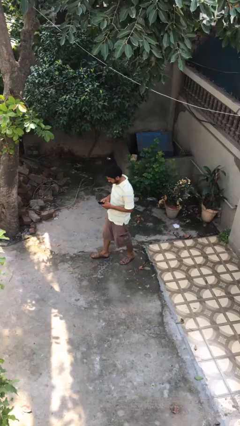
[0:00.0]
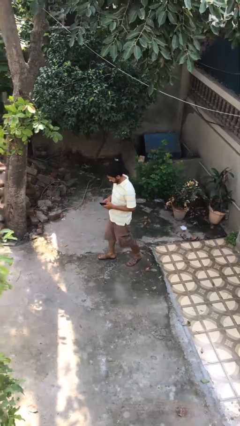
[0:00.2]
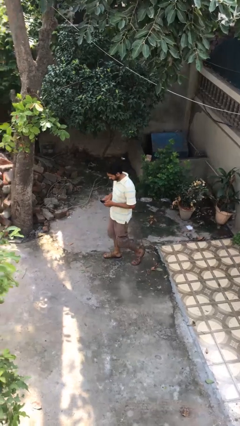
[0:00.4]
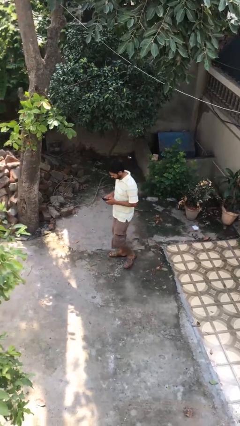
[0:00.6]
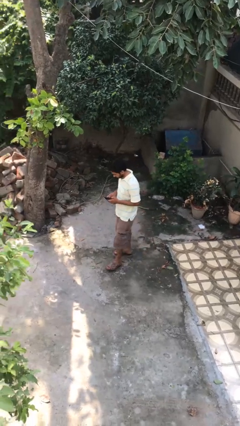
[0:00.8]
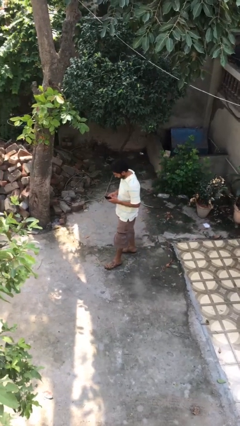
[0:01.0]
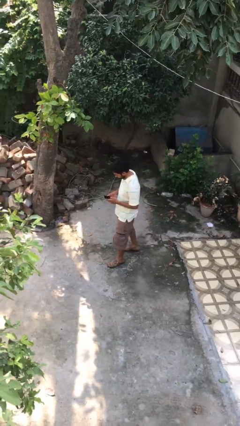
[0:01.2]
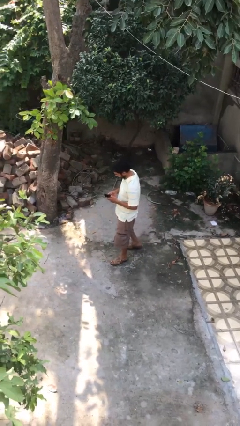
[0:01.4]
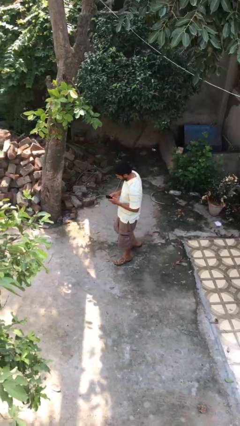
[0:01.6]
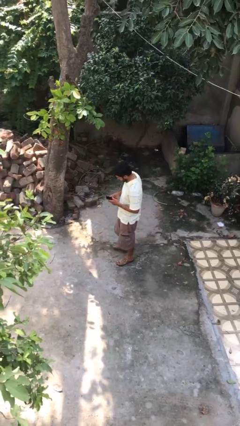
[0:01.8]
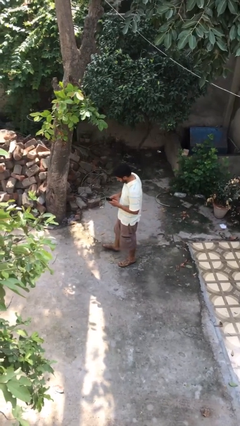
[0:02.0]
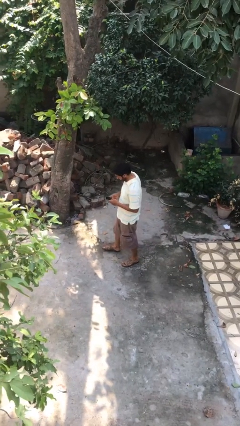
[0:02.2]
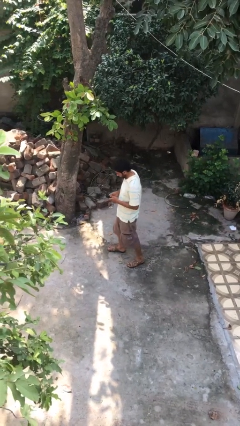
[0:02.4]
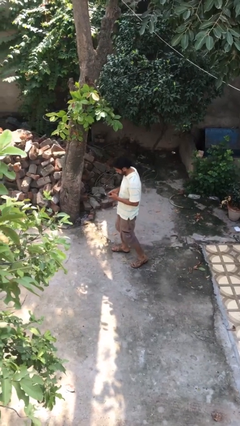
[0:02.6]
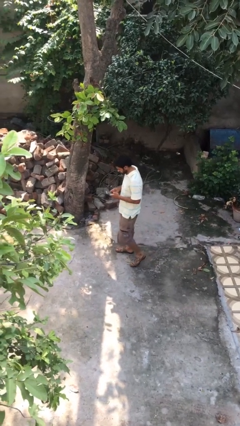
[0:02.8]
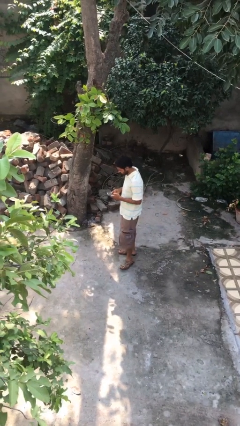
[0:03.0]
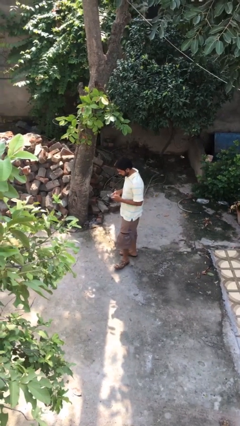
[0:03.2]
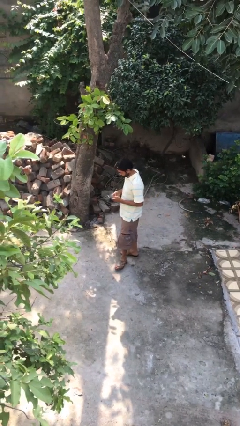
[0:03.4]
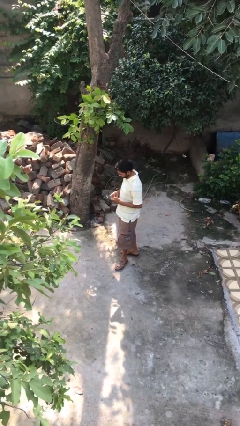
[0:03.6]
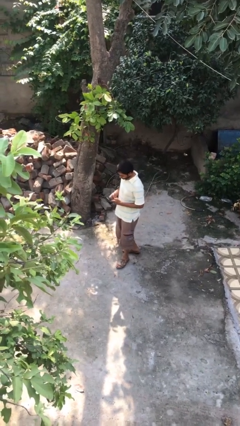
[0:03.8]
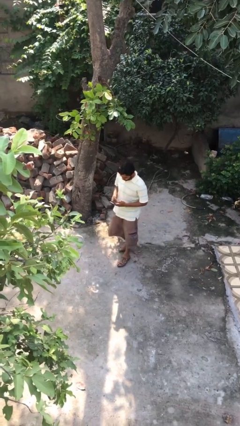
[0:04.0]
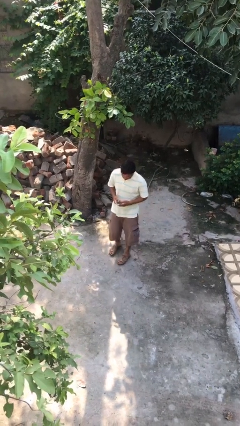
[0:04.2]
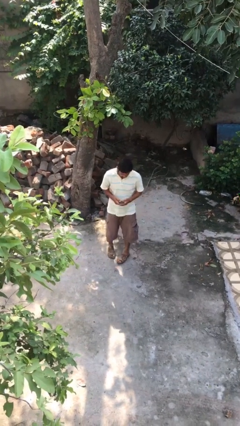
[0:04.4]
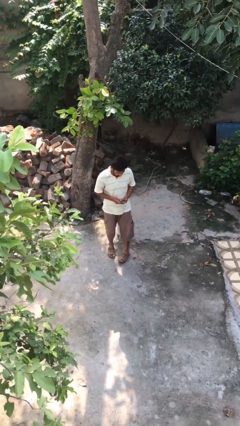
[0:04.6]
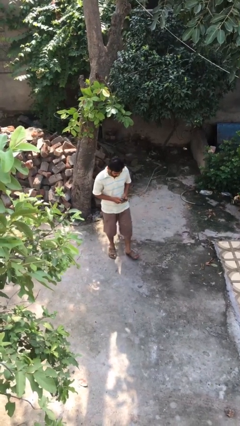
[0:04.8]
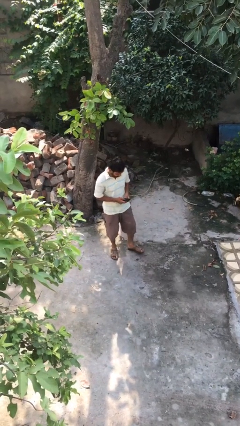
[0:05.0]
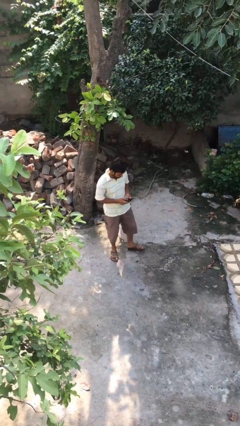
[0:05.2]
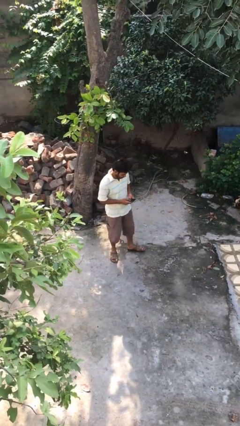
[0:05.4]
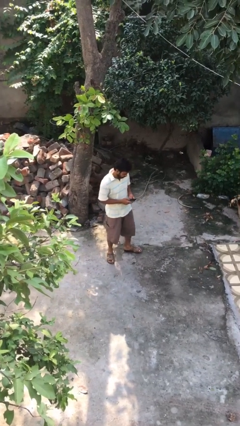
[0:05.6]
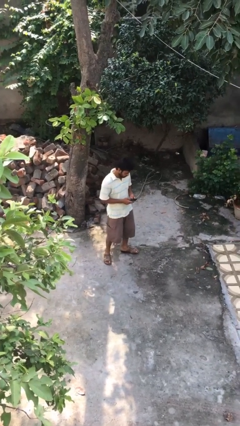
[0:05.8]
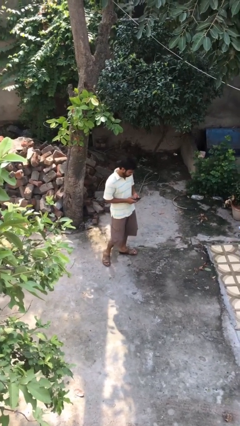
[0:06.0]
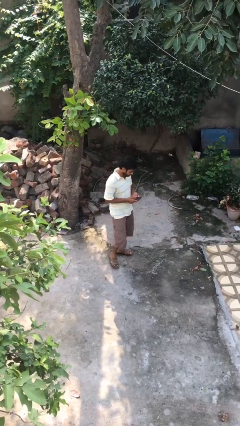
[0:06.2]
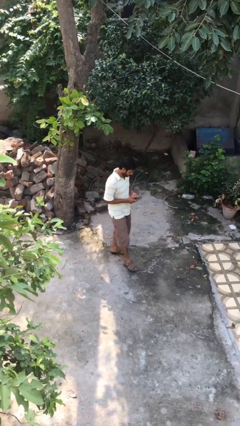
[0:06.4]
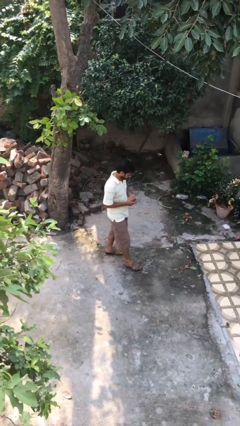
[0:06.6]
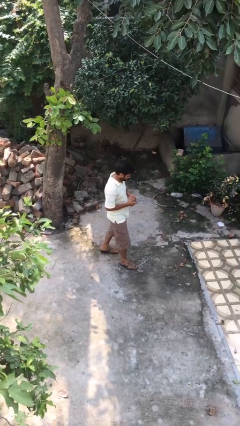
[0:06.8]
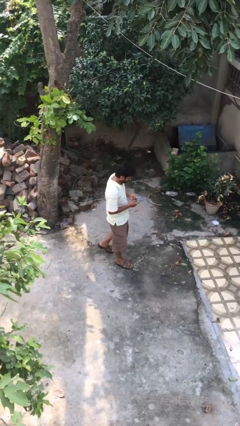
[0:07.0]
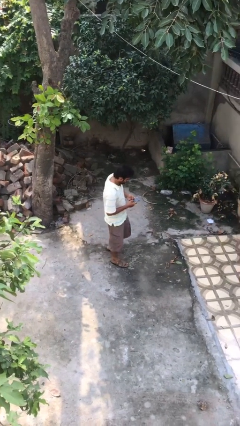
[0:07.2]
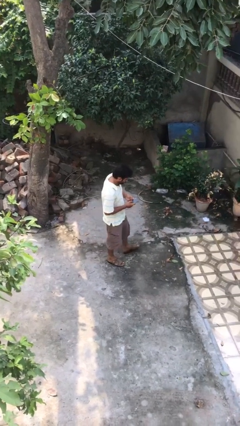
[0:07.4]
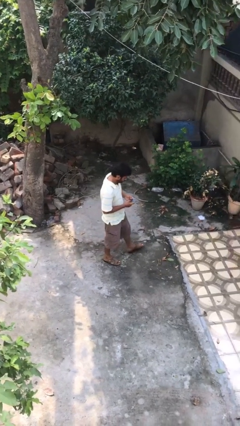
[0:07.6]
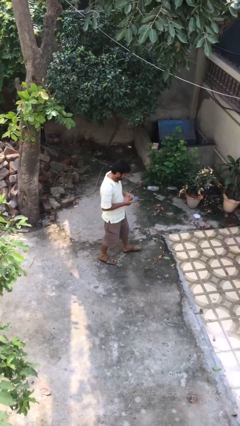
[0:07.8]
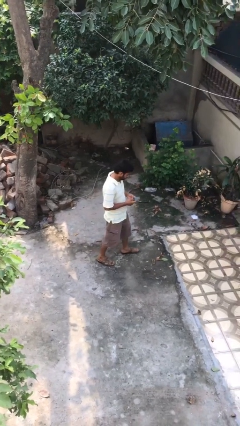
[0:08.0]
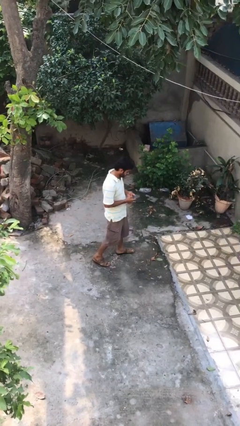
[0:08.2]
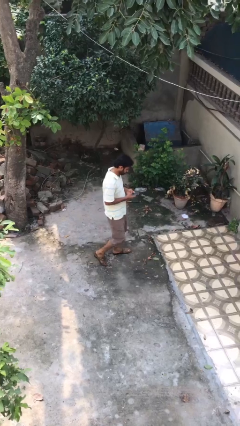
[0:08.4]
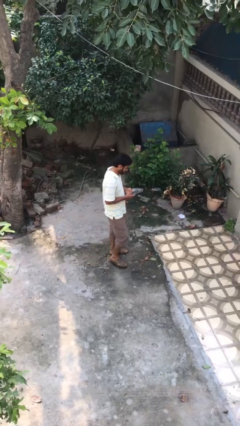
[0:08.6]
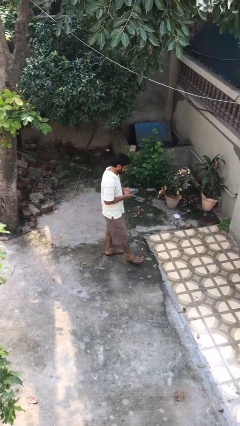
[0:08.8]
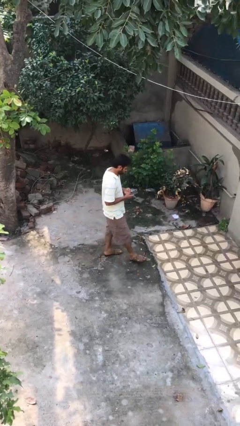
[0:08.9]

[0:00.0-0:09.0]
person texts on phone

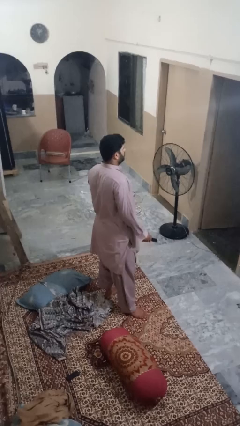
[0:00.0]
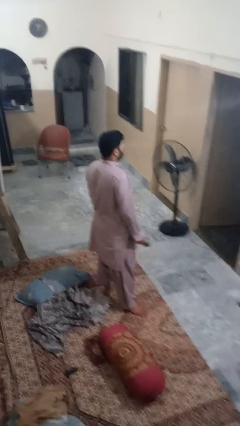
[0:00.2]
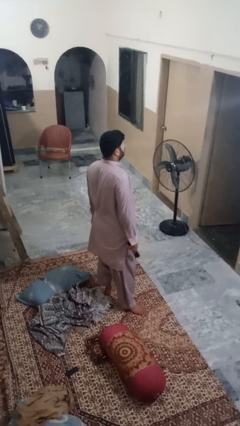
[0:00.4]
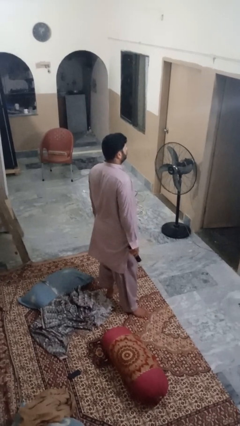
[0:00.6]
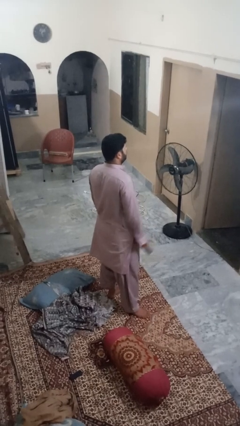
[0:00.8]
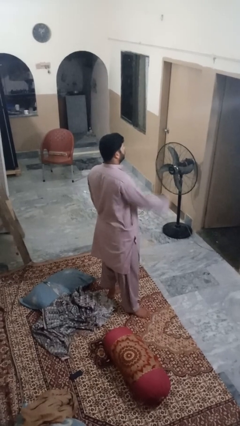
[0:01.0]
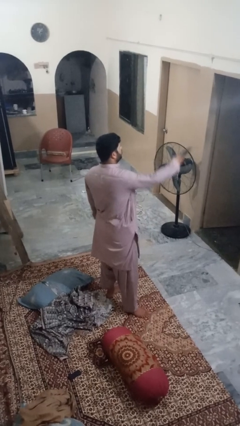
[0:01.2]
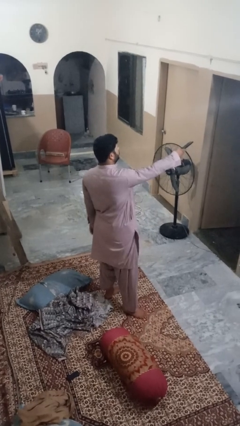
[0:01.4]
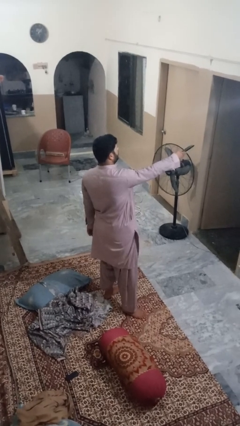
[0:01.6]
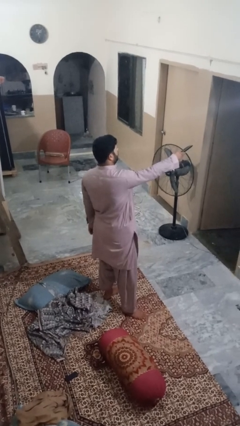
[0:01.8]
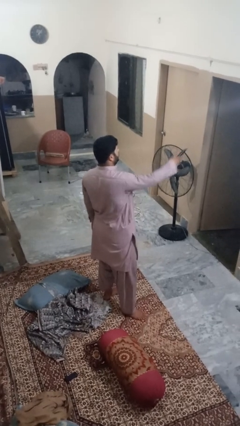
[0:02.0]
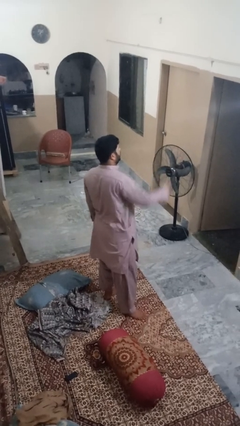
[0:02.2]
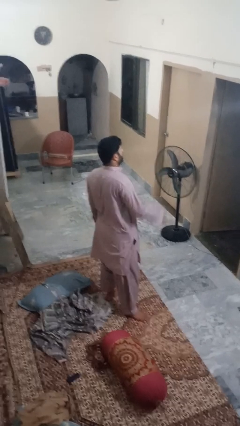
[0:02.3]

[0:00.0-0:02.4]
person uses television remote

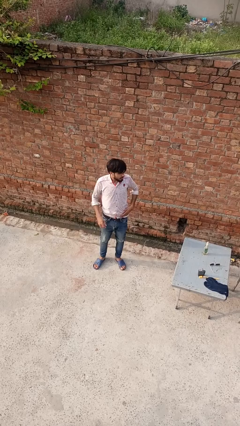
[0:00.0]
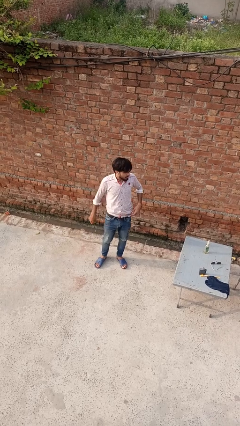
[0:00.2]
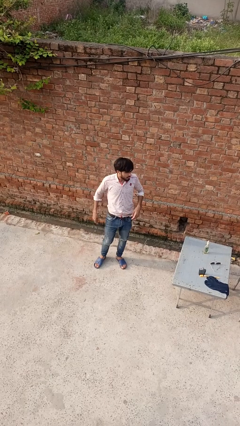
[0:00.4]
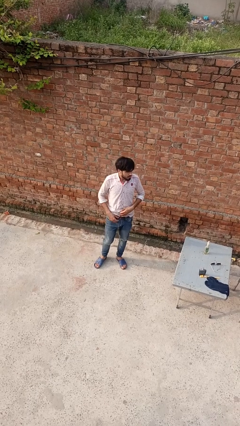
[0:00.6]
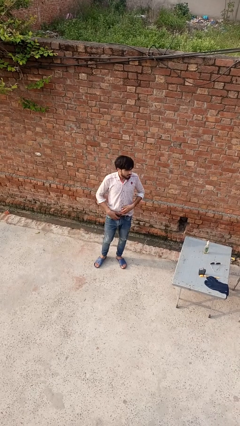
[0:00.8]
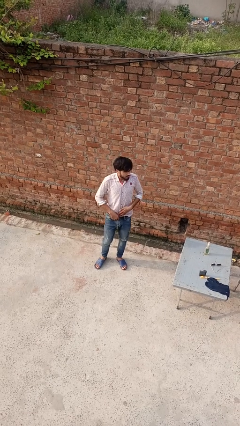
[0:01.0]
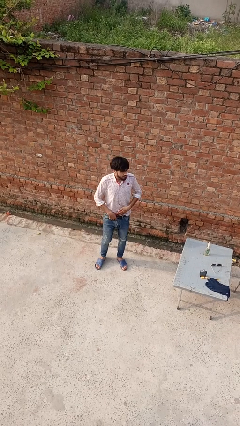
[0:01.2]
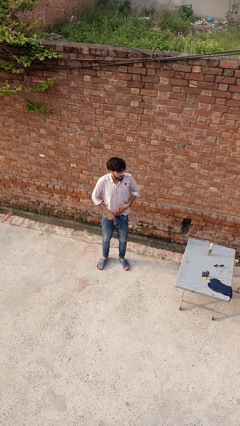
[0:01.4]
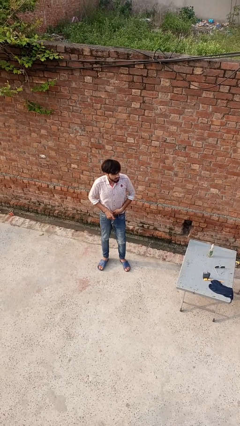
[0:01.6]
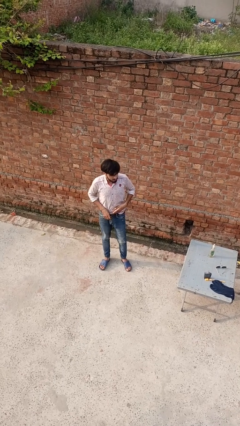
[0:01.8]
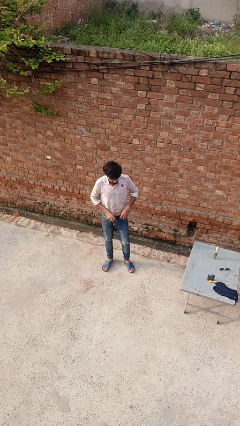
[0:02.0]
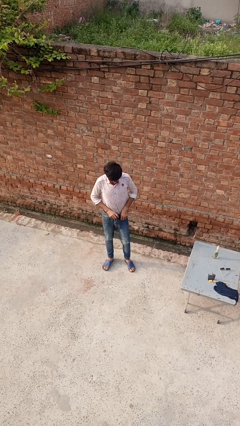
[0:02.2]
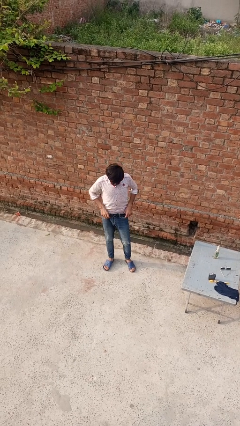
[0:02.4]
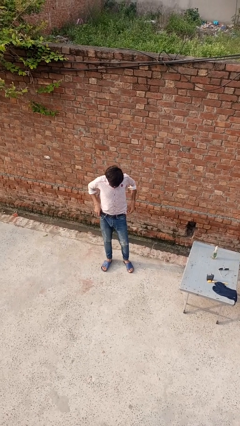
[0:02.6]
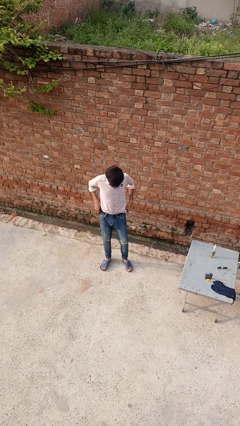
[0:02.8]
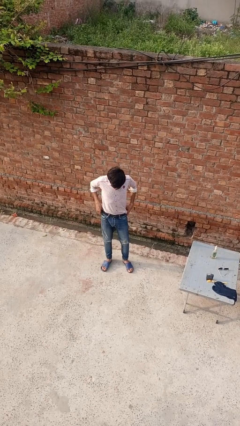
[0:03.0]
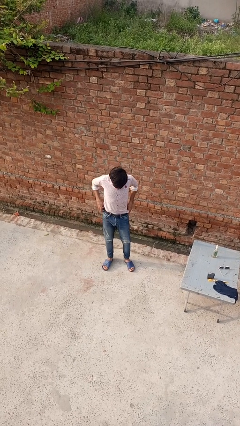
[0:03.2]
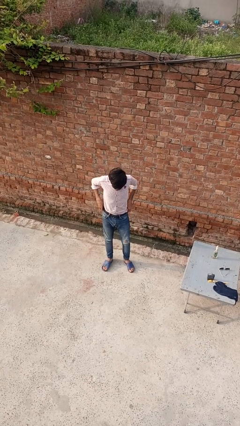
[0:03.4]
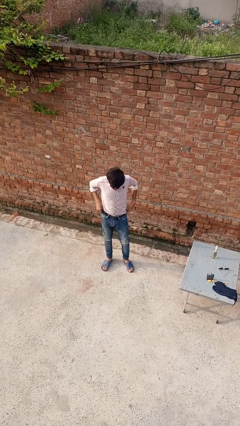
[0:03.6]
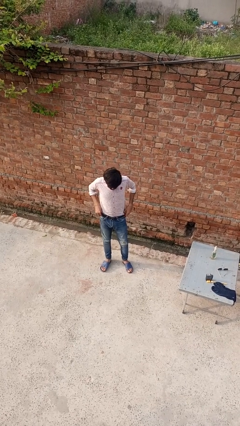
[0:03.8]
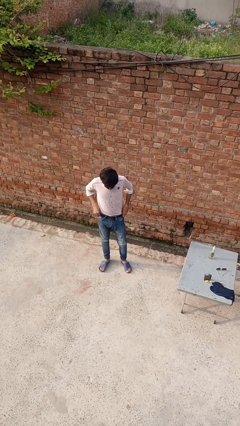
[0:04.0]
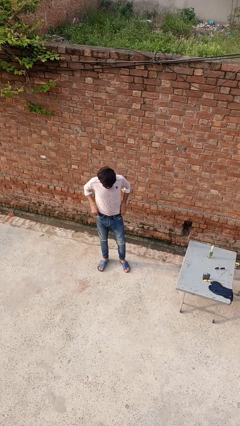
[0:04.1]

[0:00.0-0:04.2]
person hikes up pants

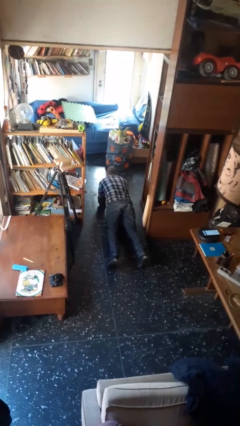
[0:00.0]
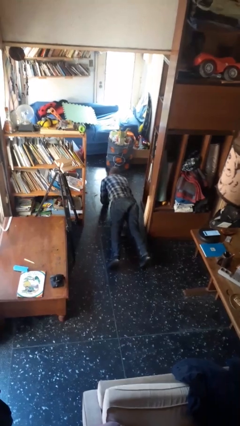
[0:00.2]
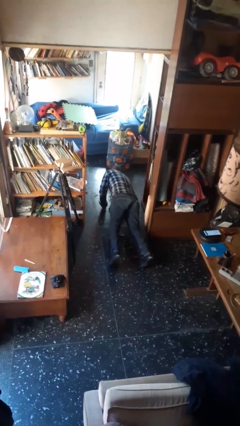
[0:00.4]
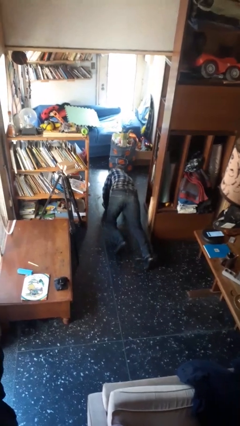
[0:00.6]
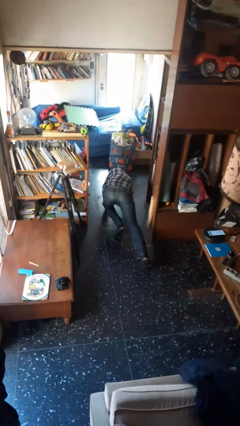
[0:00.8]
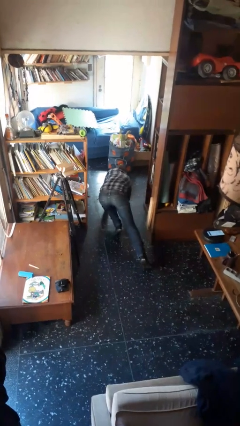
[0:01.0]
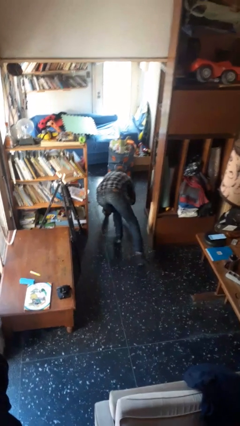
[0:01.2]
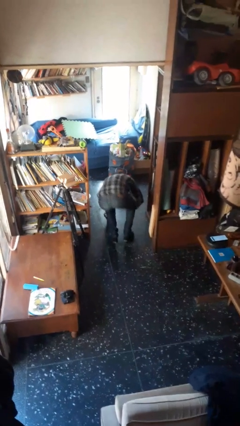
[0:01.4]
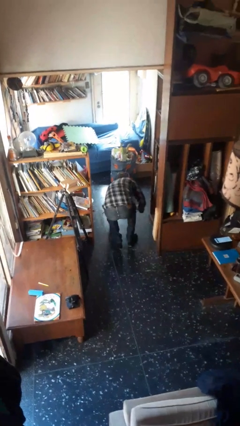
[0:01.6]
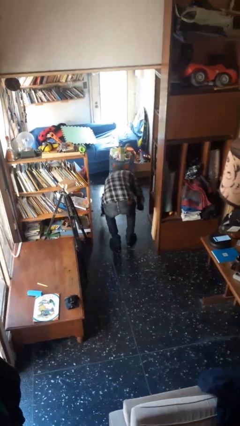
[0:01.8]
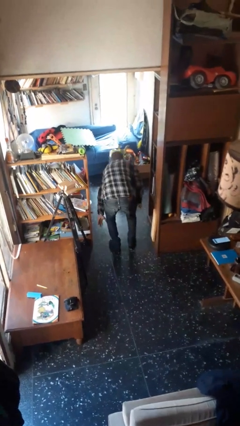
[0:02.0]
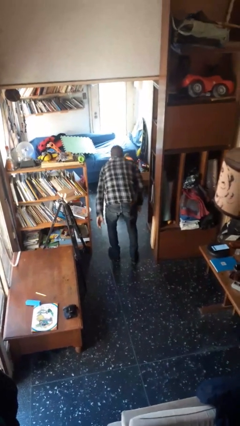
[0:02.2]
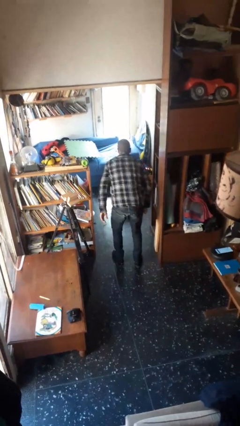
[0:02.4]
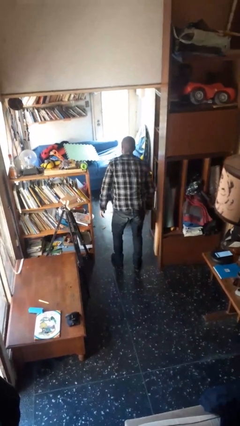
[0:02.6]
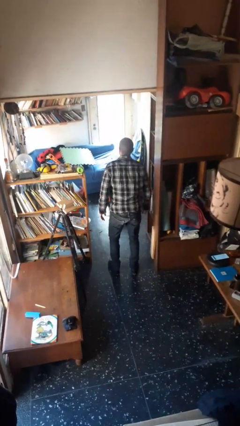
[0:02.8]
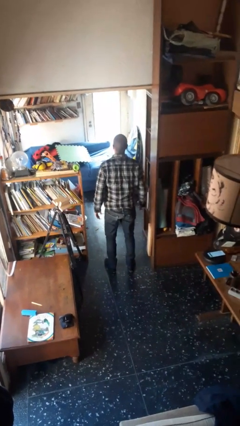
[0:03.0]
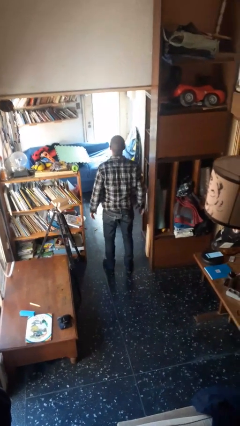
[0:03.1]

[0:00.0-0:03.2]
person stands up from floor
